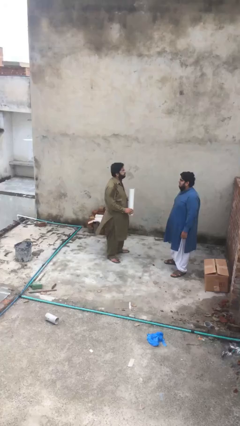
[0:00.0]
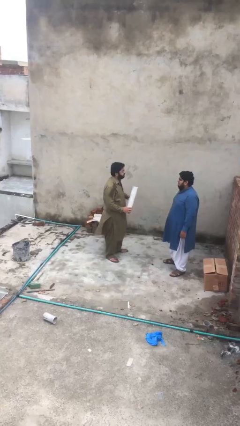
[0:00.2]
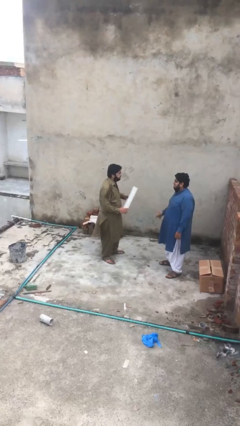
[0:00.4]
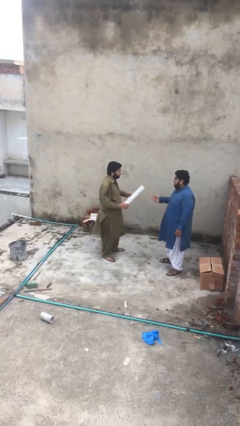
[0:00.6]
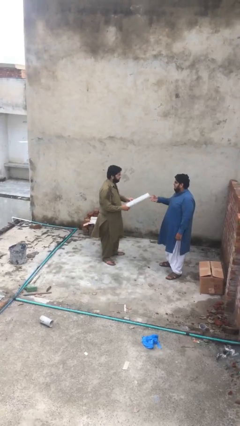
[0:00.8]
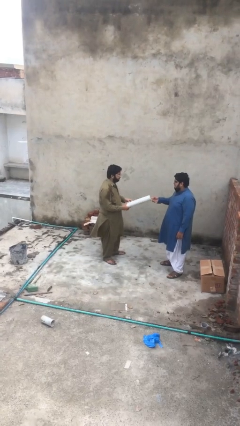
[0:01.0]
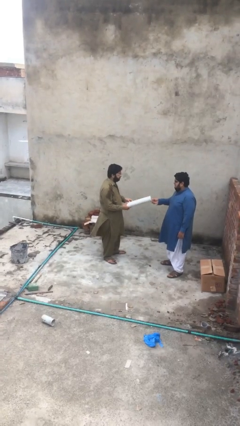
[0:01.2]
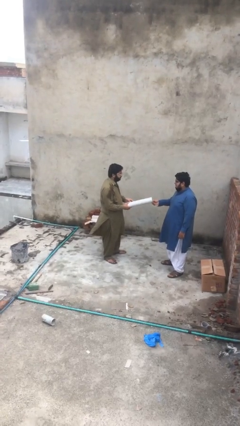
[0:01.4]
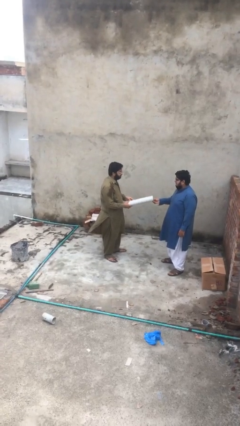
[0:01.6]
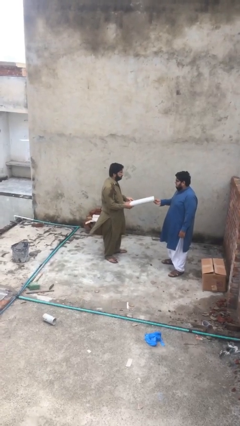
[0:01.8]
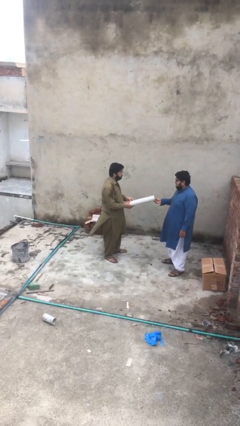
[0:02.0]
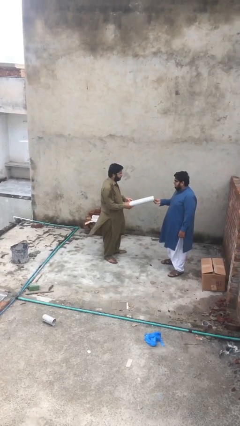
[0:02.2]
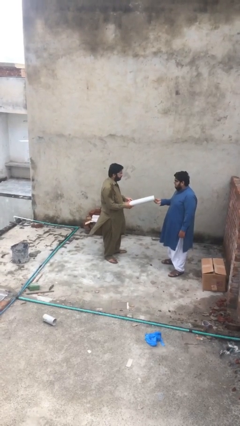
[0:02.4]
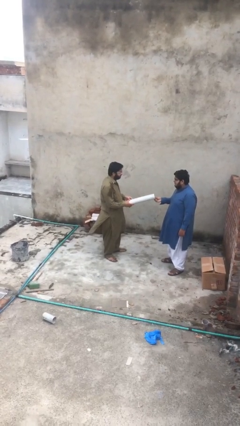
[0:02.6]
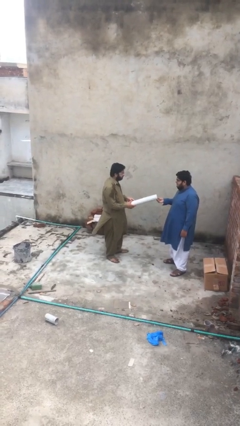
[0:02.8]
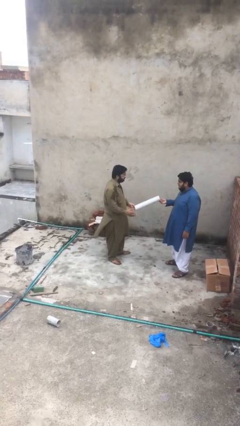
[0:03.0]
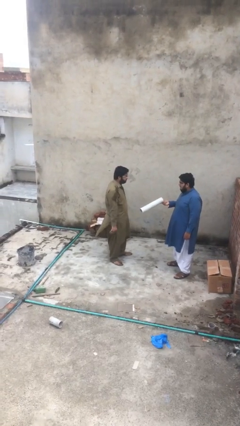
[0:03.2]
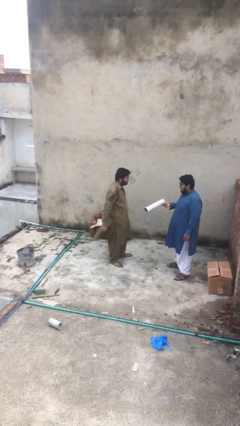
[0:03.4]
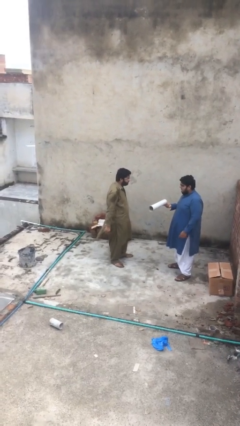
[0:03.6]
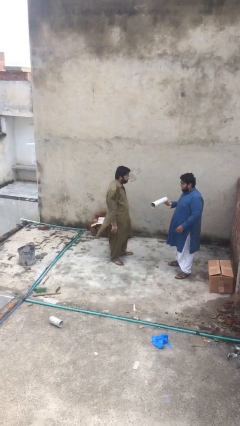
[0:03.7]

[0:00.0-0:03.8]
person transfers object to person

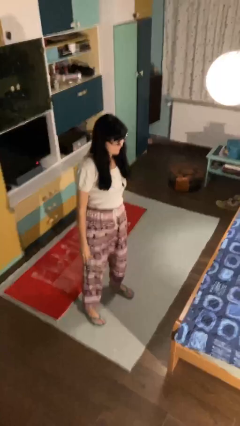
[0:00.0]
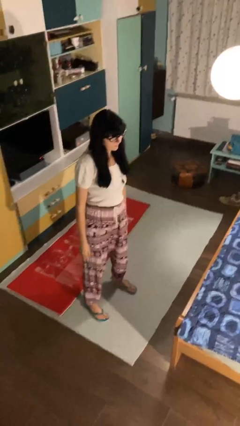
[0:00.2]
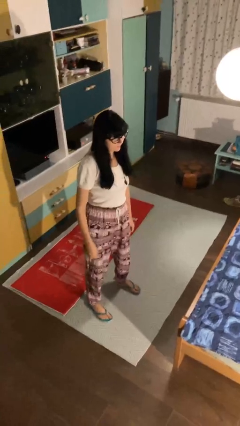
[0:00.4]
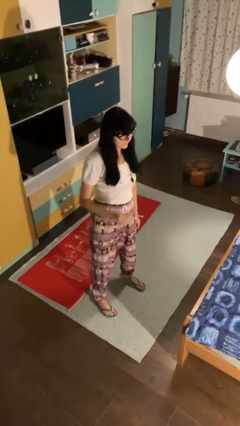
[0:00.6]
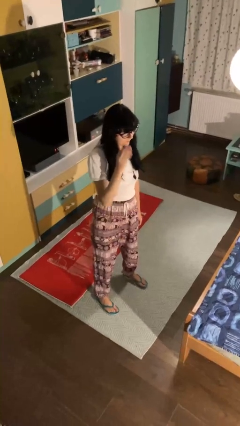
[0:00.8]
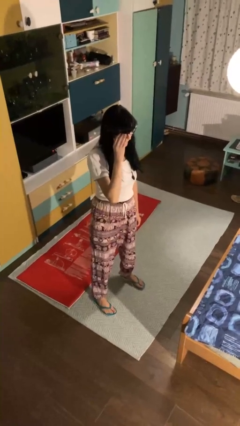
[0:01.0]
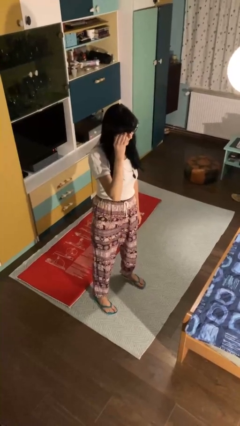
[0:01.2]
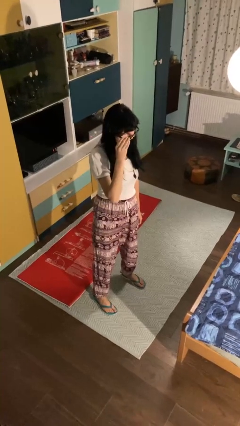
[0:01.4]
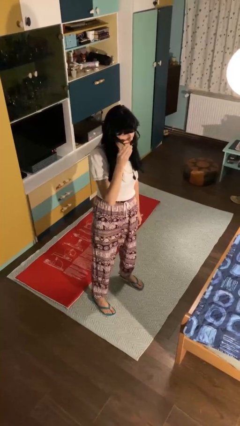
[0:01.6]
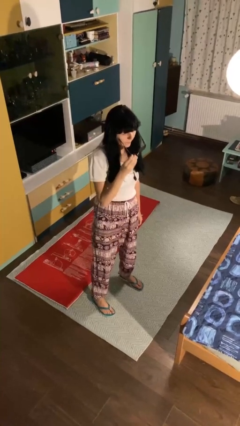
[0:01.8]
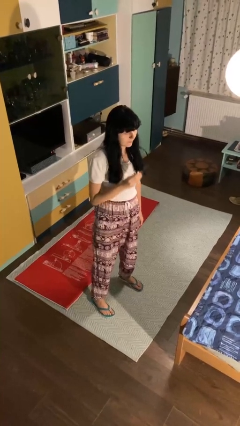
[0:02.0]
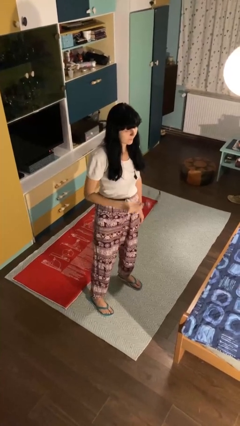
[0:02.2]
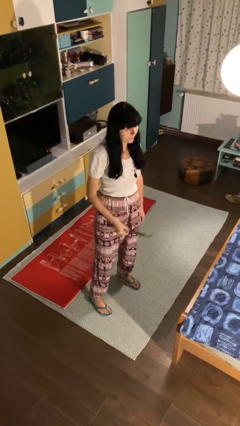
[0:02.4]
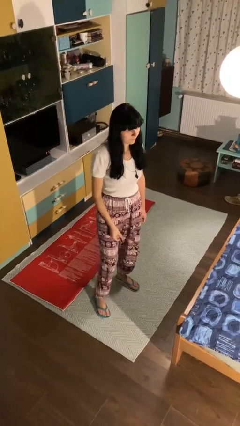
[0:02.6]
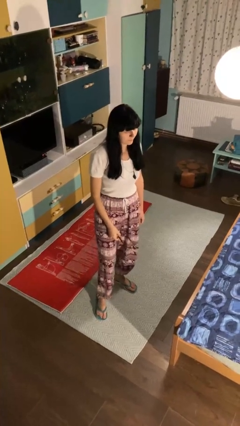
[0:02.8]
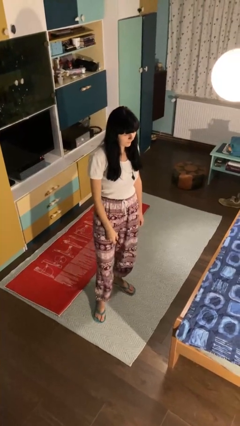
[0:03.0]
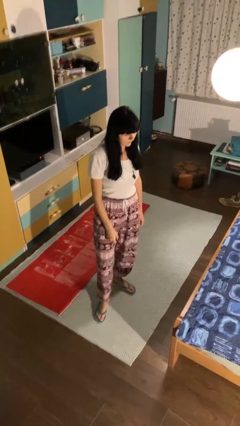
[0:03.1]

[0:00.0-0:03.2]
person takes off glasses

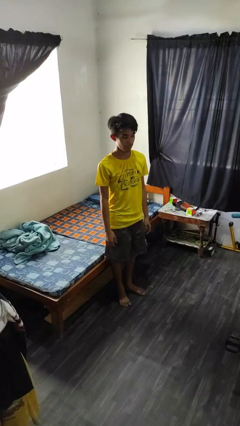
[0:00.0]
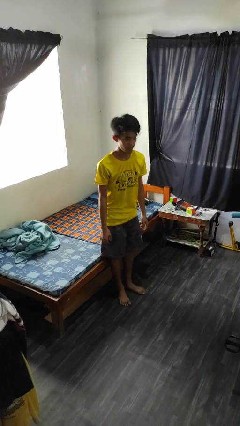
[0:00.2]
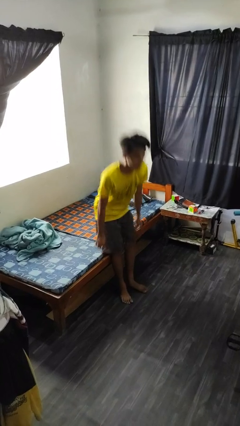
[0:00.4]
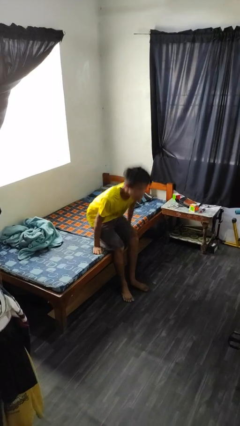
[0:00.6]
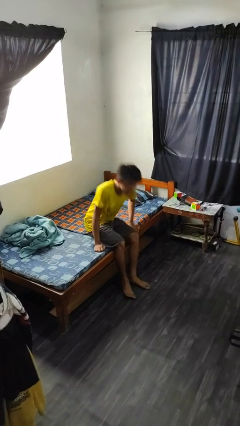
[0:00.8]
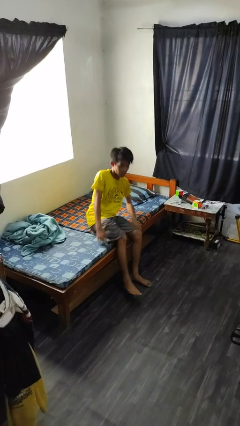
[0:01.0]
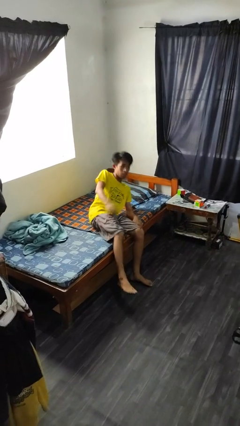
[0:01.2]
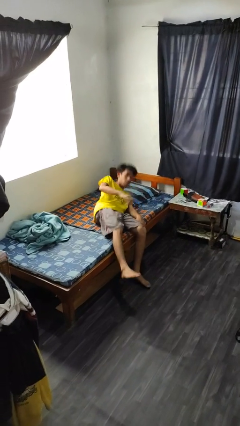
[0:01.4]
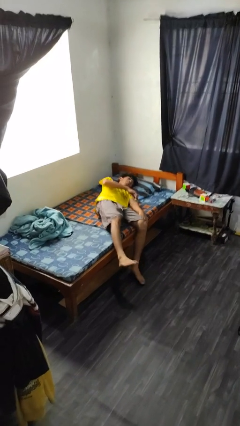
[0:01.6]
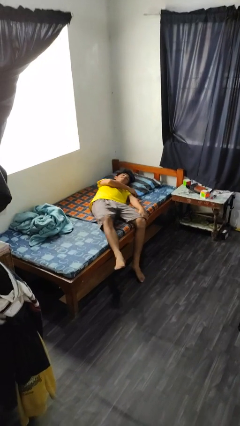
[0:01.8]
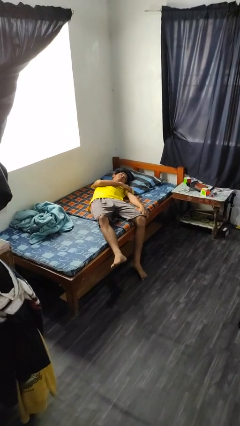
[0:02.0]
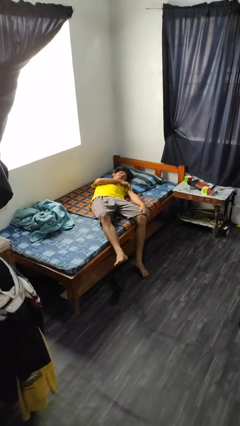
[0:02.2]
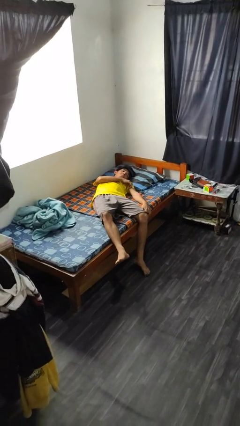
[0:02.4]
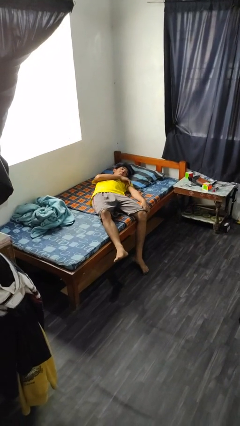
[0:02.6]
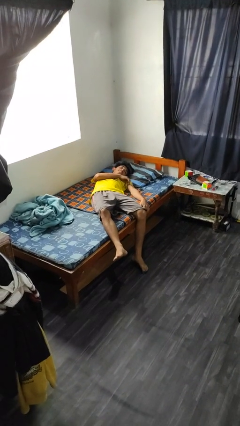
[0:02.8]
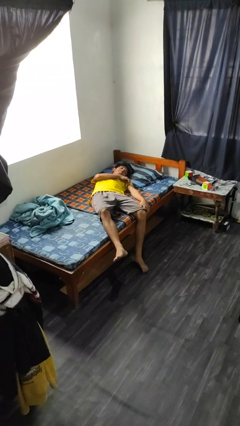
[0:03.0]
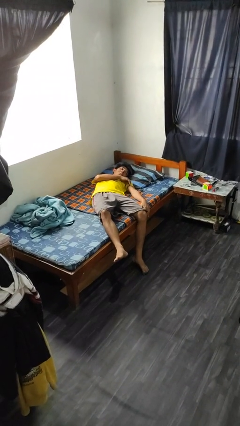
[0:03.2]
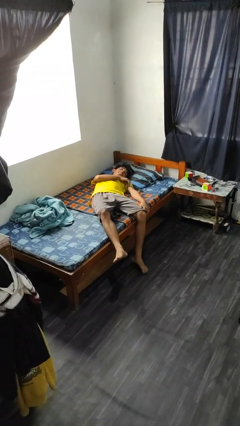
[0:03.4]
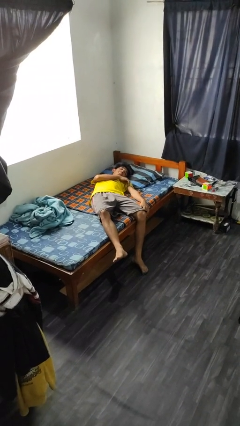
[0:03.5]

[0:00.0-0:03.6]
person lies down on bed

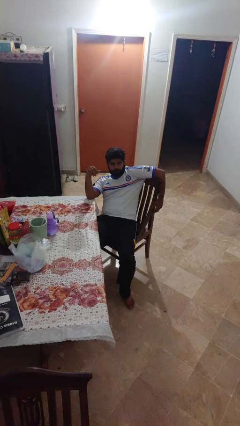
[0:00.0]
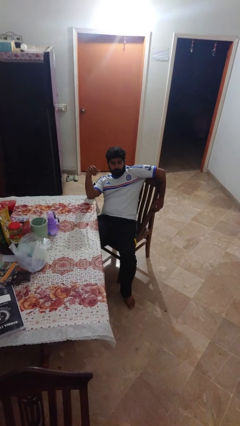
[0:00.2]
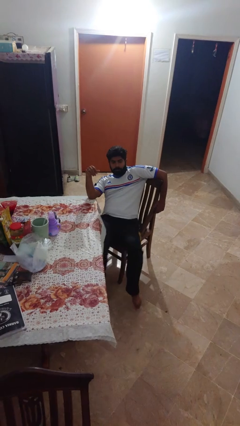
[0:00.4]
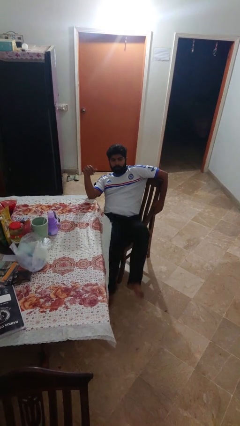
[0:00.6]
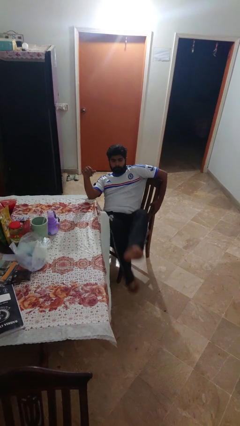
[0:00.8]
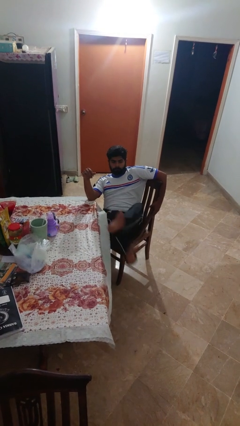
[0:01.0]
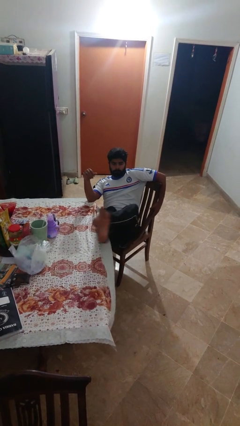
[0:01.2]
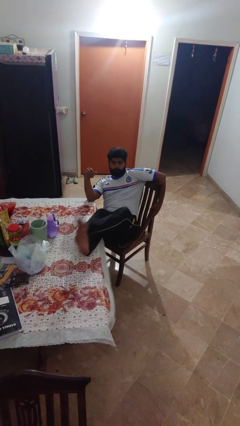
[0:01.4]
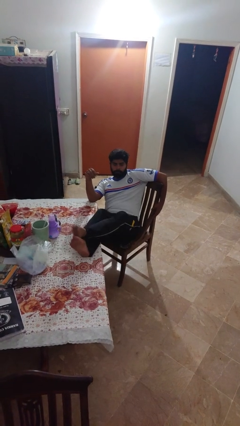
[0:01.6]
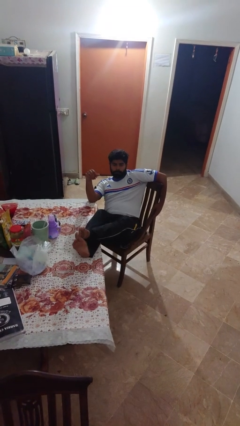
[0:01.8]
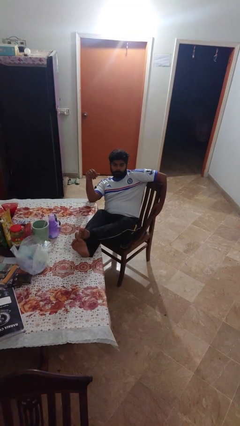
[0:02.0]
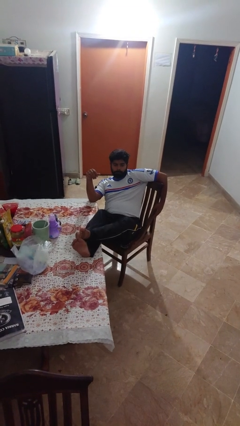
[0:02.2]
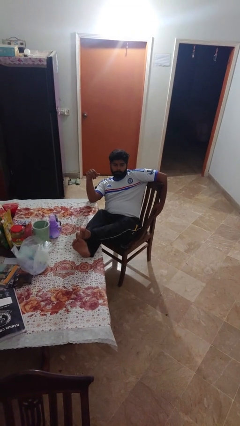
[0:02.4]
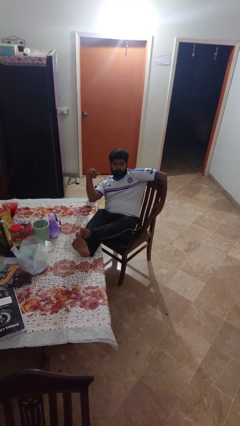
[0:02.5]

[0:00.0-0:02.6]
person puts feet up

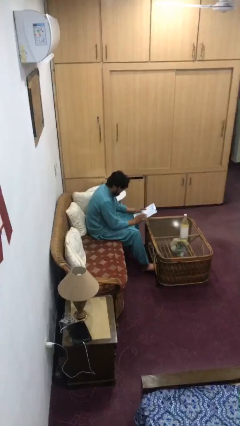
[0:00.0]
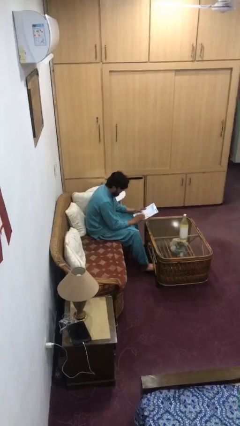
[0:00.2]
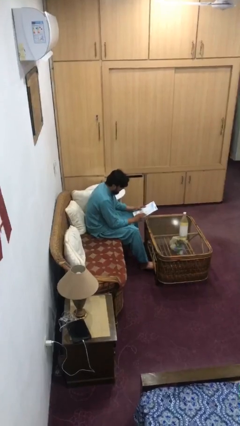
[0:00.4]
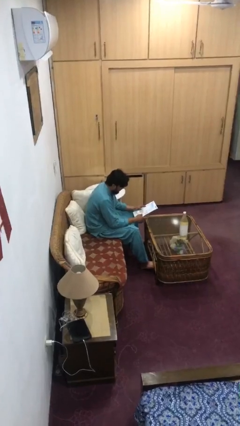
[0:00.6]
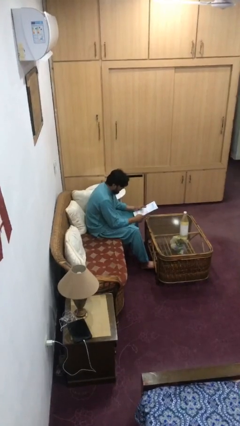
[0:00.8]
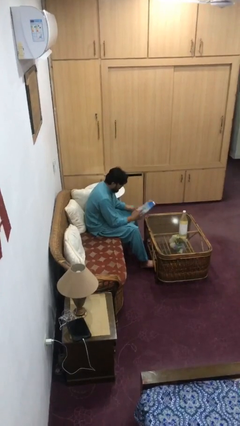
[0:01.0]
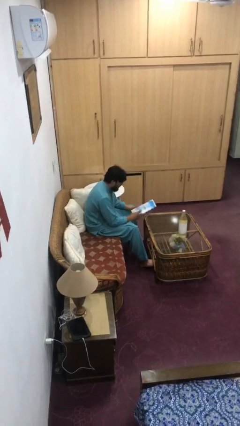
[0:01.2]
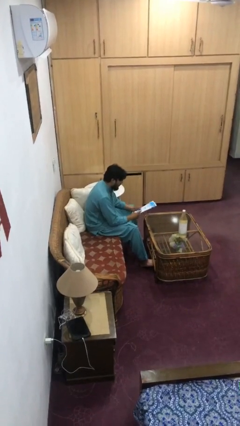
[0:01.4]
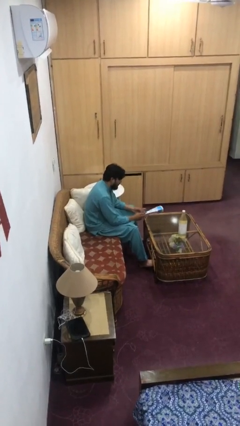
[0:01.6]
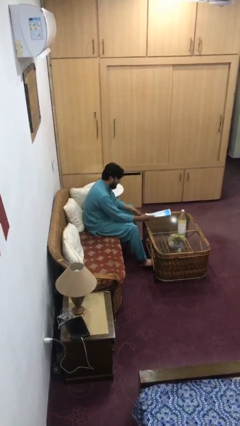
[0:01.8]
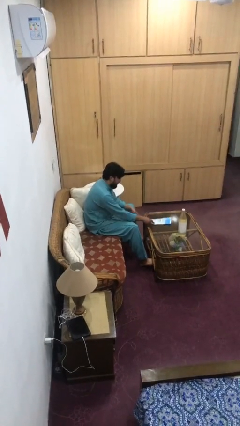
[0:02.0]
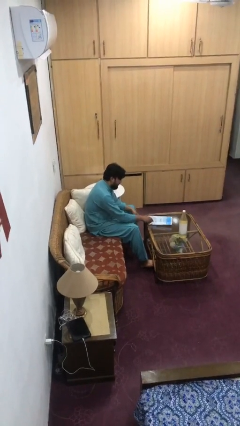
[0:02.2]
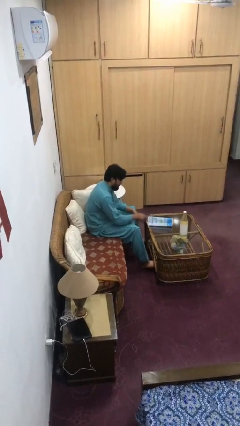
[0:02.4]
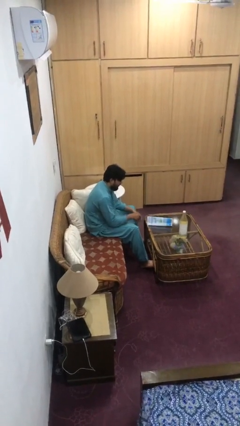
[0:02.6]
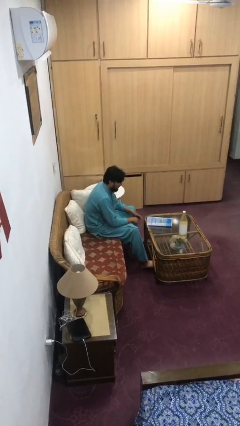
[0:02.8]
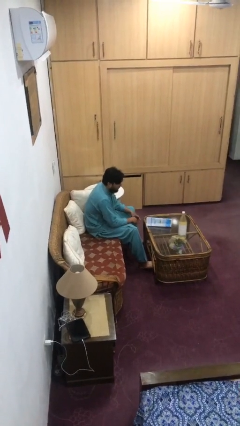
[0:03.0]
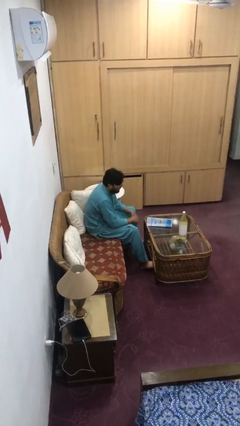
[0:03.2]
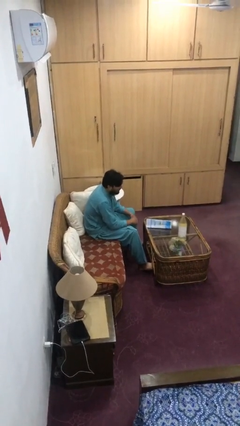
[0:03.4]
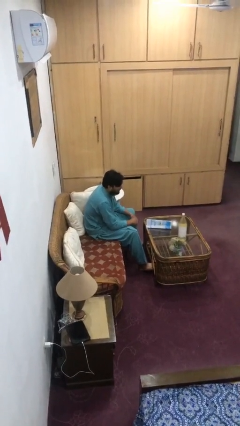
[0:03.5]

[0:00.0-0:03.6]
person puts down object on table

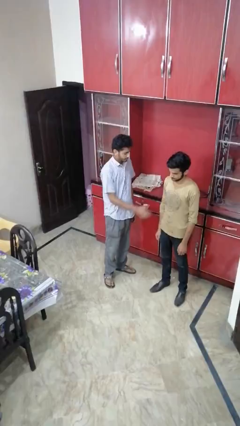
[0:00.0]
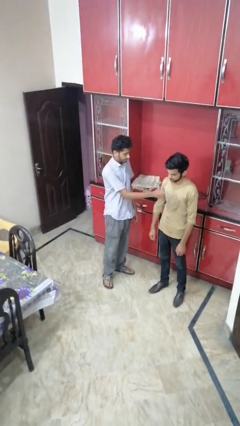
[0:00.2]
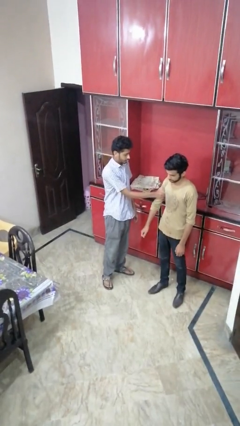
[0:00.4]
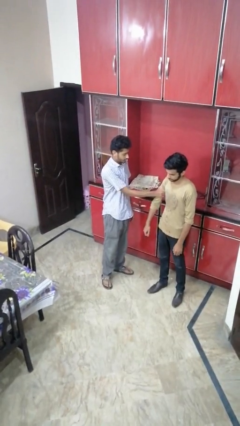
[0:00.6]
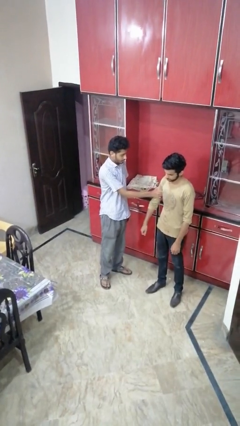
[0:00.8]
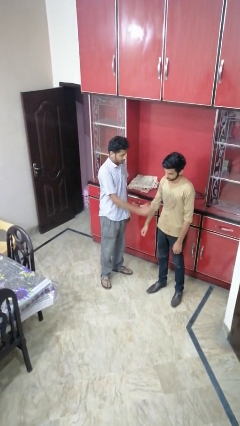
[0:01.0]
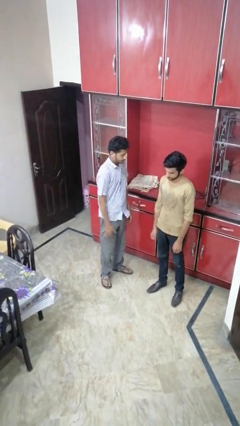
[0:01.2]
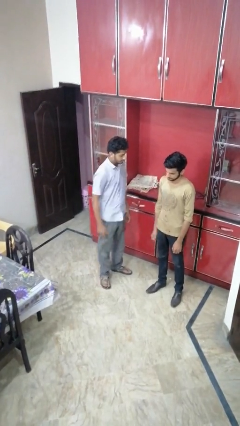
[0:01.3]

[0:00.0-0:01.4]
person grabs person by bicep
